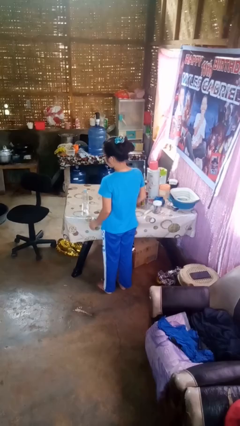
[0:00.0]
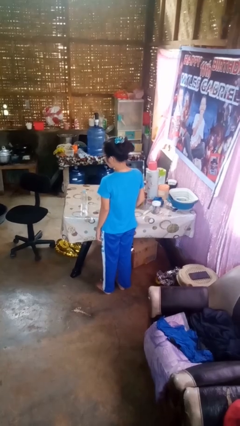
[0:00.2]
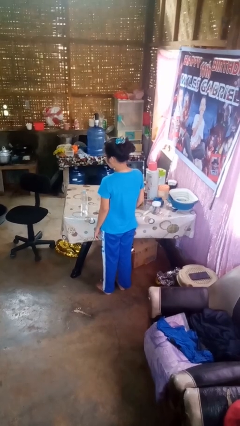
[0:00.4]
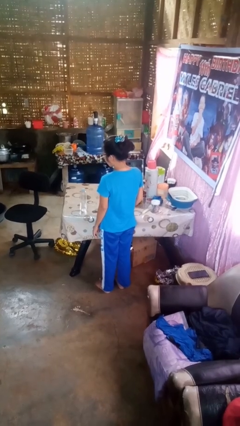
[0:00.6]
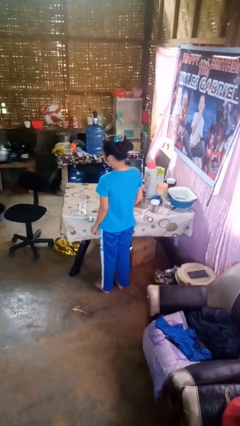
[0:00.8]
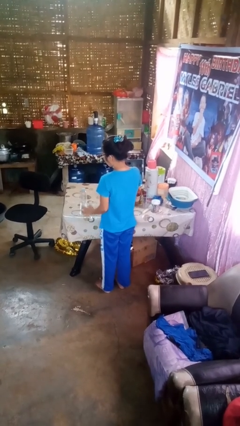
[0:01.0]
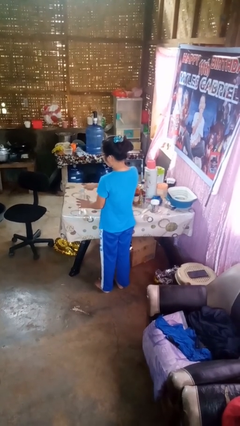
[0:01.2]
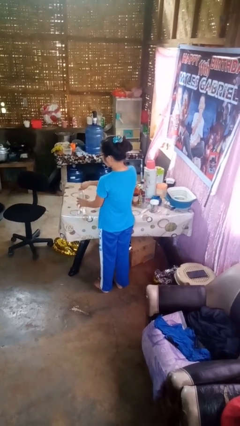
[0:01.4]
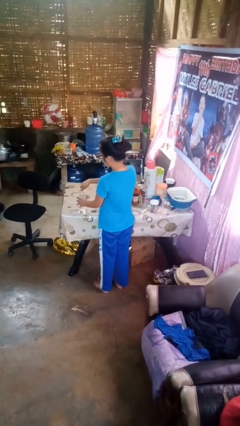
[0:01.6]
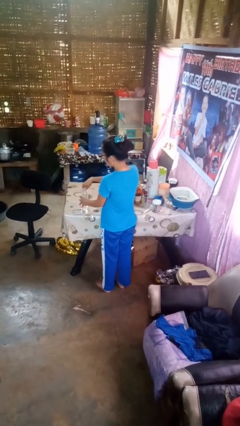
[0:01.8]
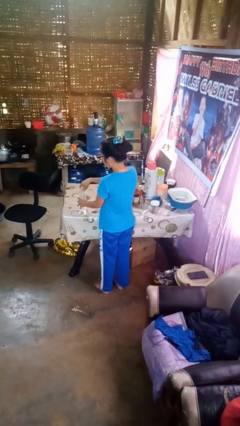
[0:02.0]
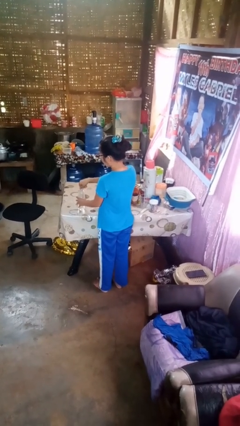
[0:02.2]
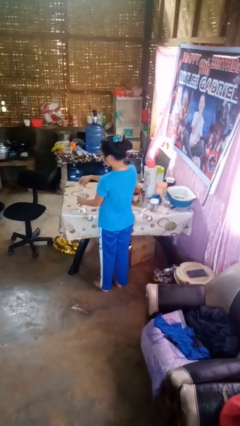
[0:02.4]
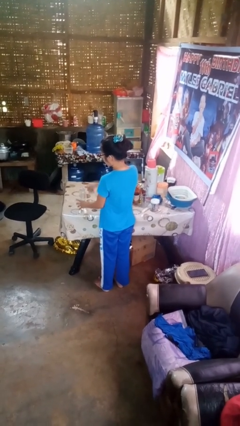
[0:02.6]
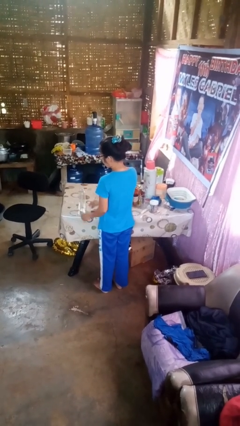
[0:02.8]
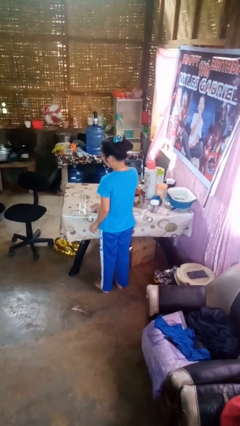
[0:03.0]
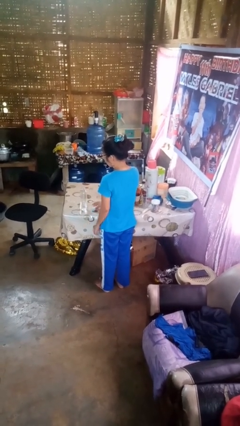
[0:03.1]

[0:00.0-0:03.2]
person unscrews lid from bottle

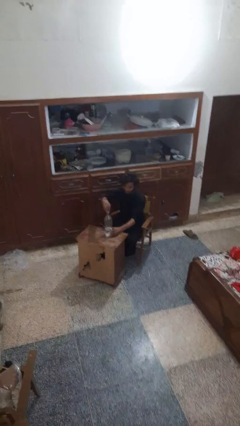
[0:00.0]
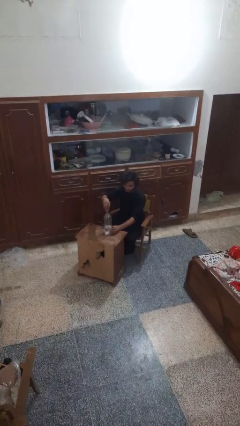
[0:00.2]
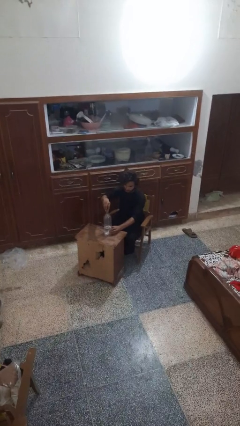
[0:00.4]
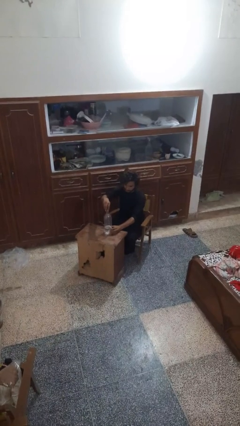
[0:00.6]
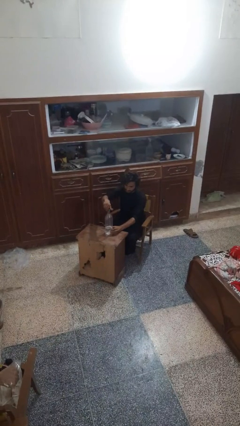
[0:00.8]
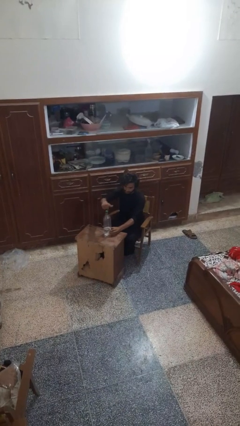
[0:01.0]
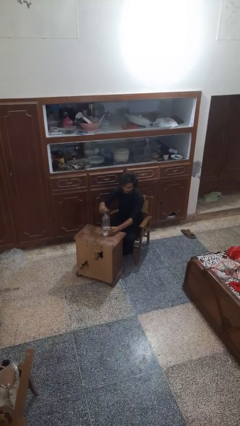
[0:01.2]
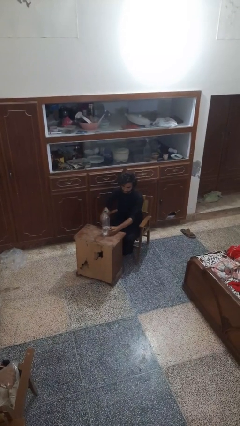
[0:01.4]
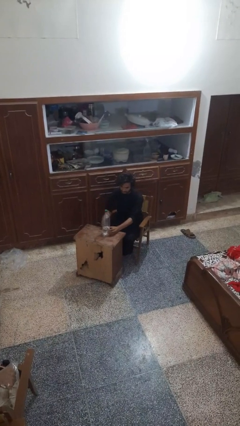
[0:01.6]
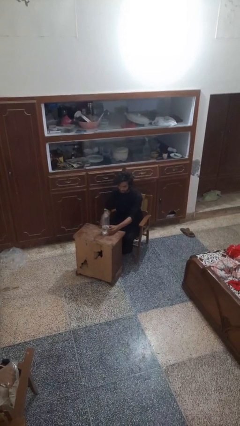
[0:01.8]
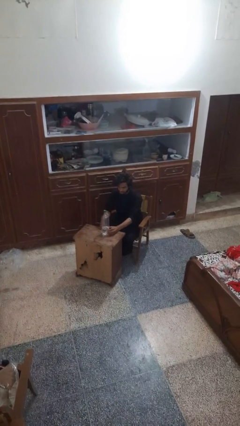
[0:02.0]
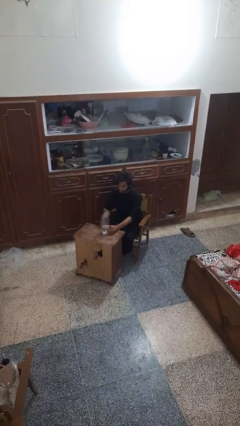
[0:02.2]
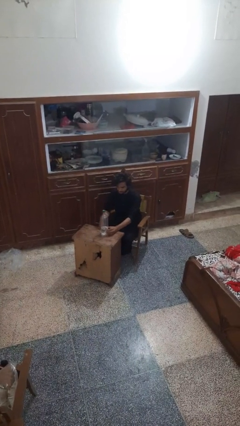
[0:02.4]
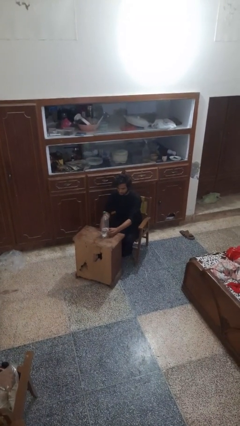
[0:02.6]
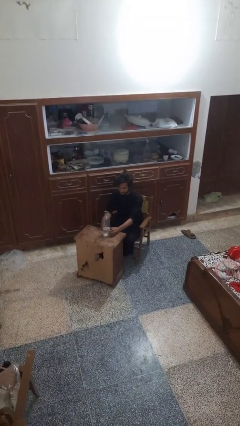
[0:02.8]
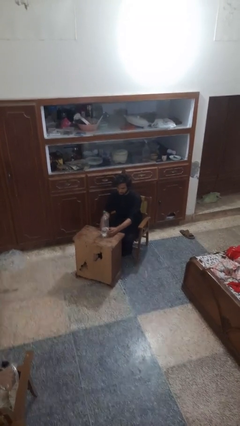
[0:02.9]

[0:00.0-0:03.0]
person screws lid to bottle

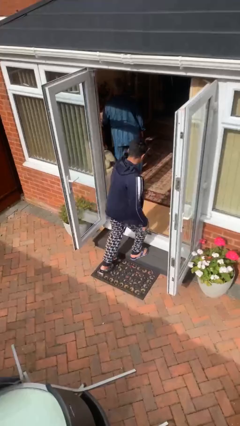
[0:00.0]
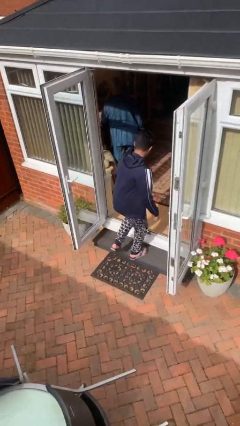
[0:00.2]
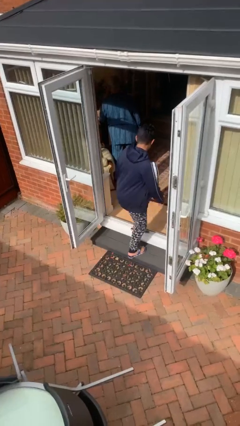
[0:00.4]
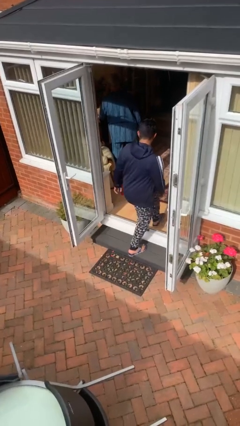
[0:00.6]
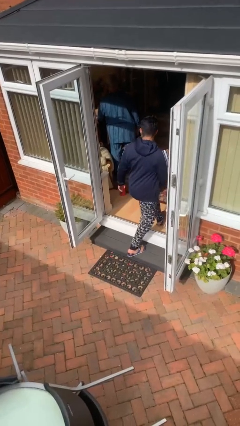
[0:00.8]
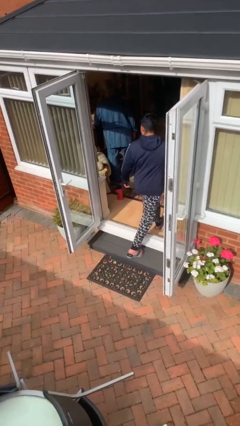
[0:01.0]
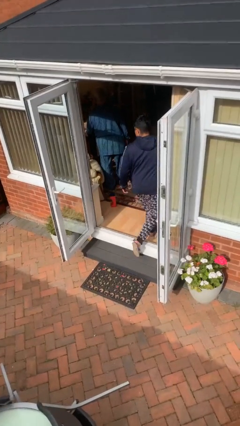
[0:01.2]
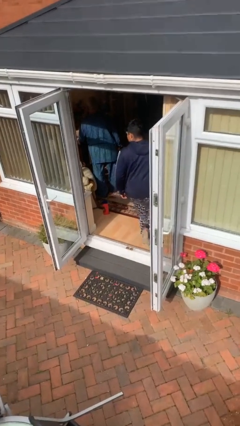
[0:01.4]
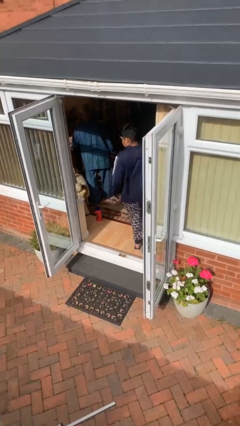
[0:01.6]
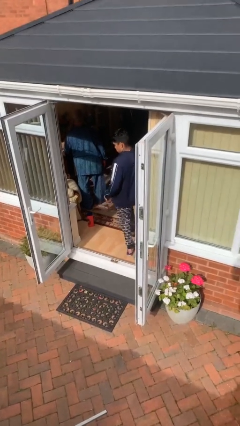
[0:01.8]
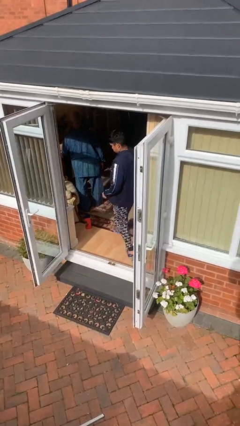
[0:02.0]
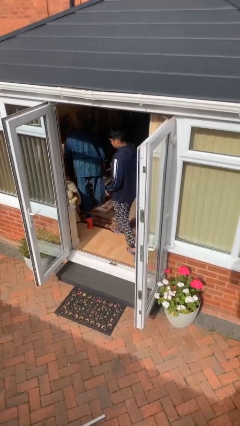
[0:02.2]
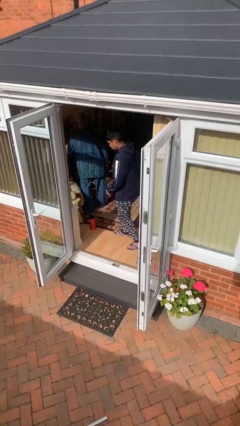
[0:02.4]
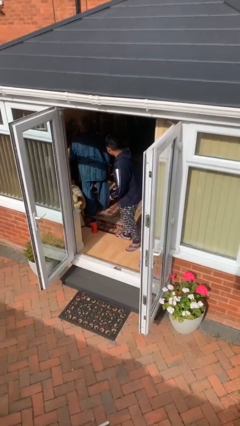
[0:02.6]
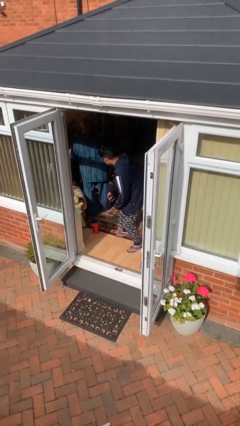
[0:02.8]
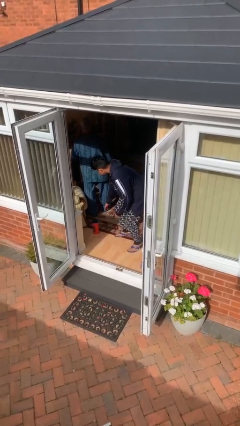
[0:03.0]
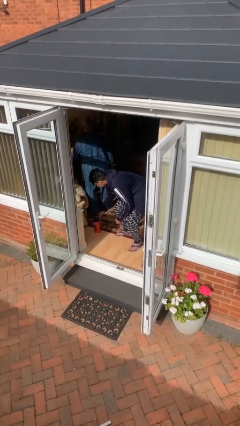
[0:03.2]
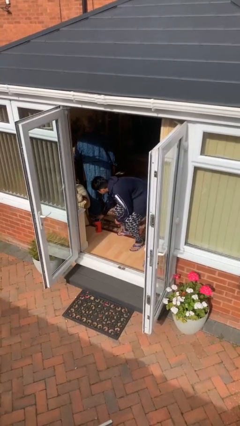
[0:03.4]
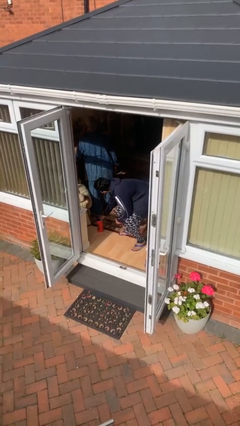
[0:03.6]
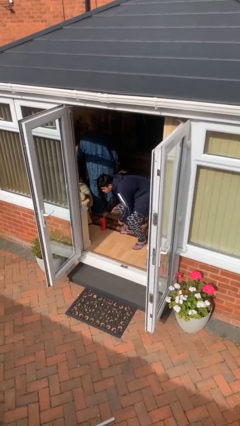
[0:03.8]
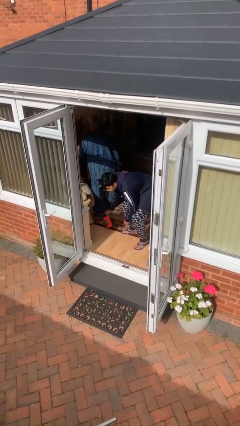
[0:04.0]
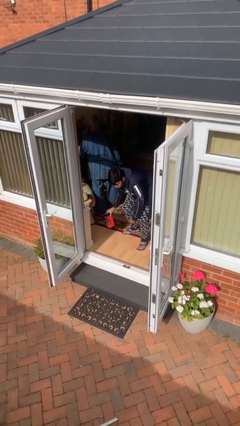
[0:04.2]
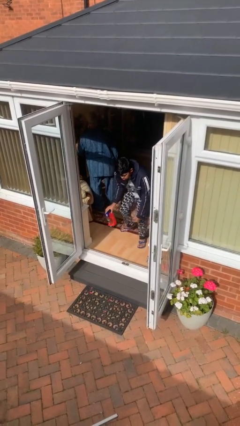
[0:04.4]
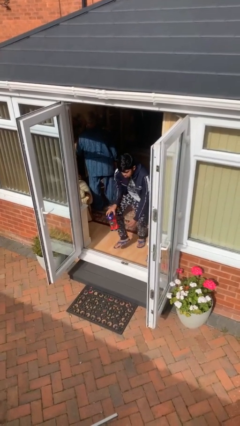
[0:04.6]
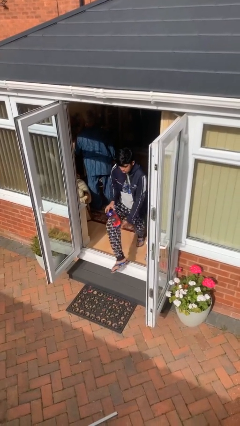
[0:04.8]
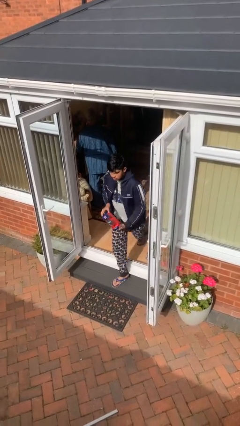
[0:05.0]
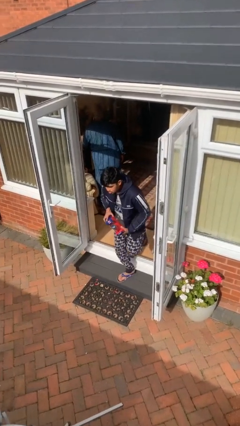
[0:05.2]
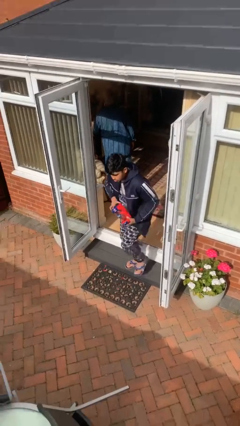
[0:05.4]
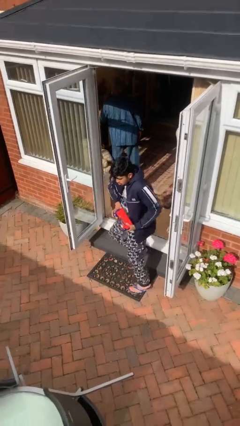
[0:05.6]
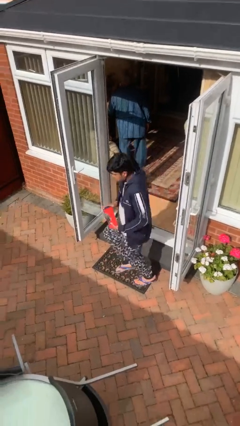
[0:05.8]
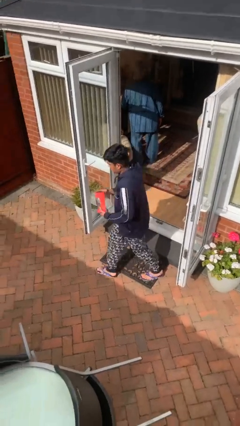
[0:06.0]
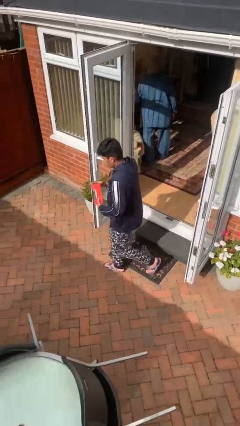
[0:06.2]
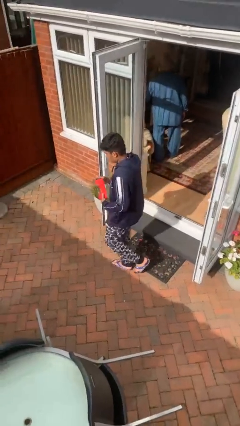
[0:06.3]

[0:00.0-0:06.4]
person steals object from person

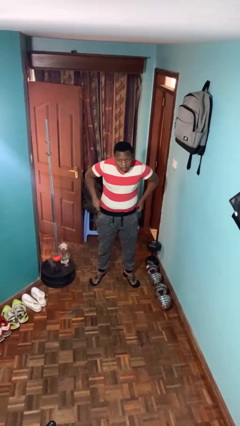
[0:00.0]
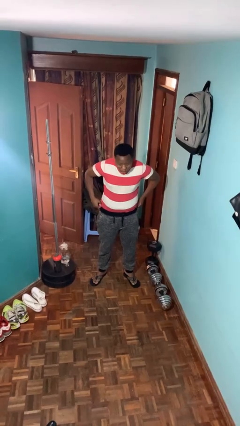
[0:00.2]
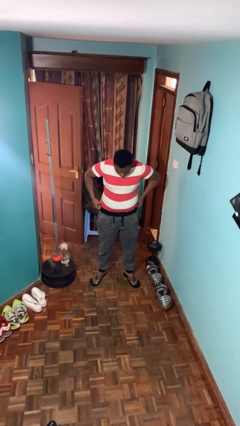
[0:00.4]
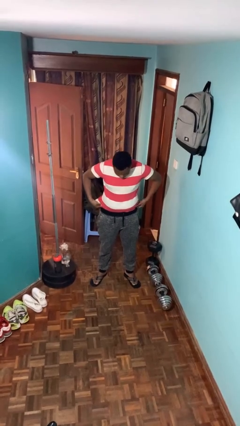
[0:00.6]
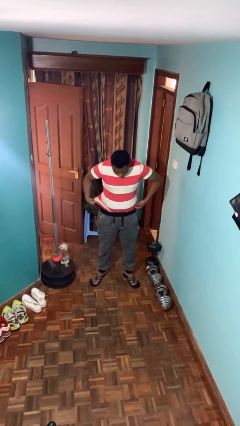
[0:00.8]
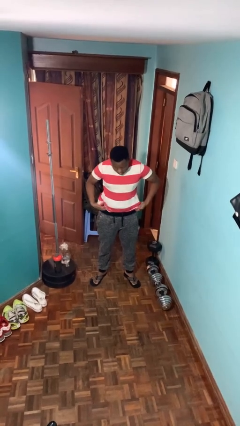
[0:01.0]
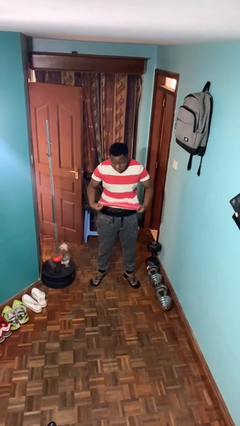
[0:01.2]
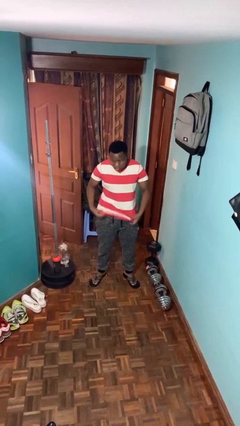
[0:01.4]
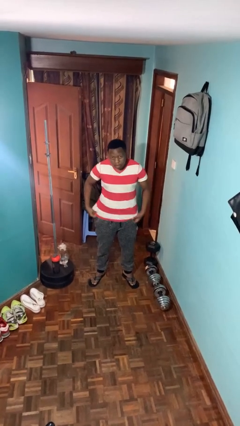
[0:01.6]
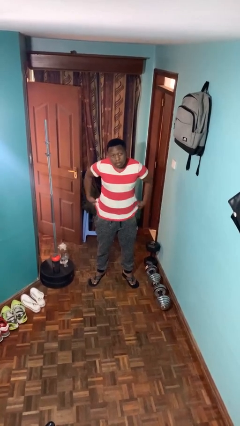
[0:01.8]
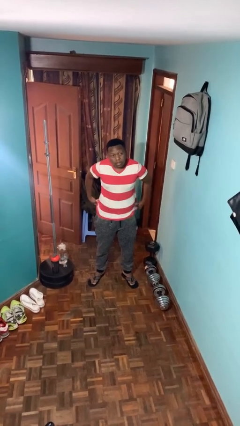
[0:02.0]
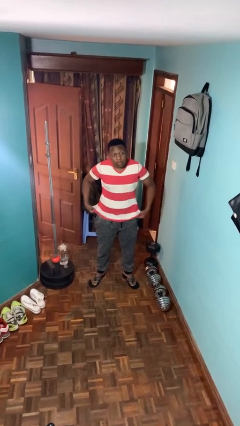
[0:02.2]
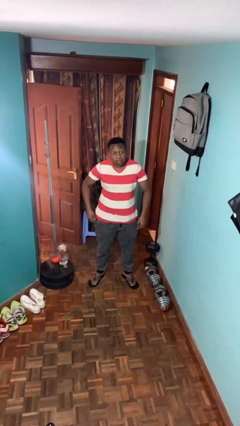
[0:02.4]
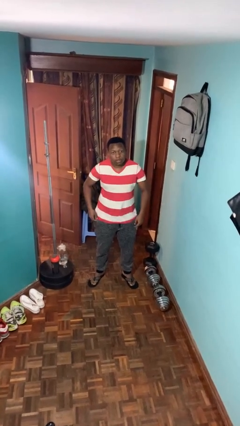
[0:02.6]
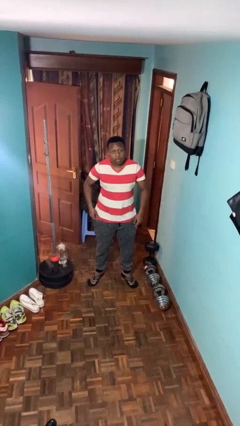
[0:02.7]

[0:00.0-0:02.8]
person untucks shirt

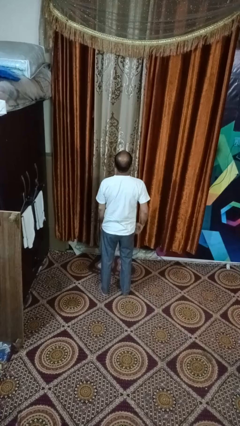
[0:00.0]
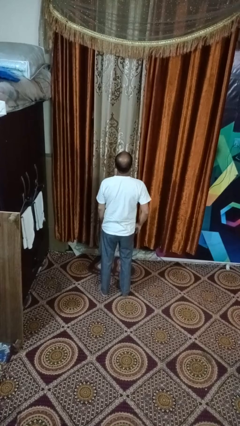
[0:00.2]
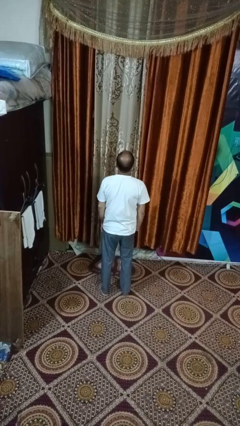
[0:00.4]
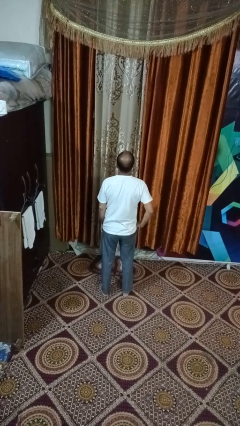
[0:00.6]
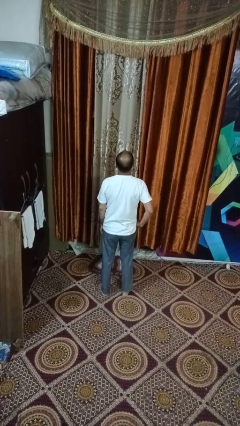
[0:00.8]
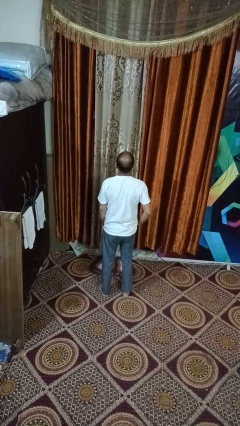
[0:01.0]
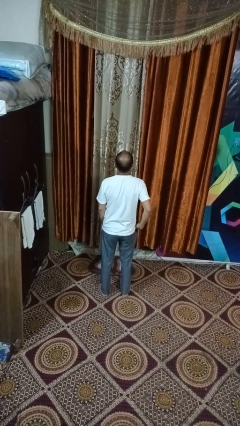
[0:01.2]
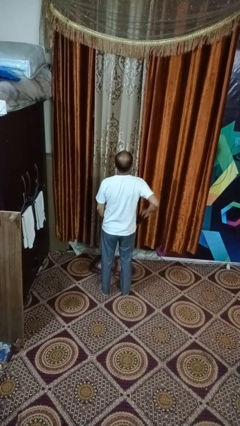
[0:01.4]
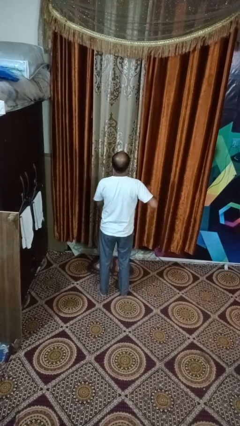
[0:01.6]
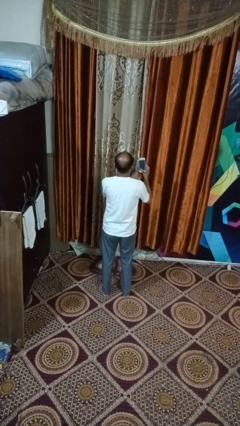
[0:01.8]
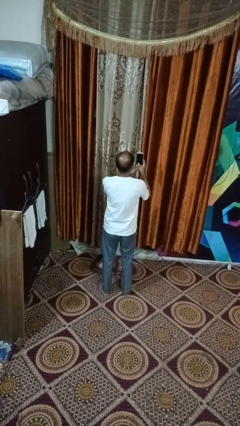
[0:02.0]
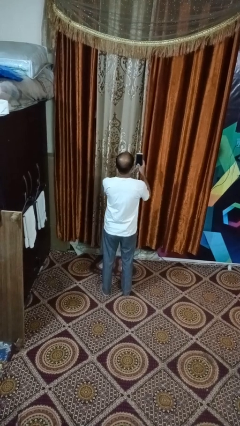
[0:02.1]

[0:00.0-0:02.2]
person takes phone from pocket

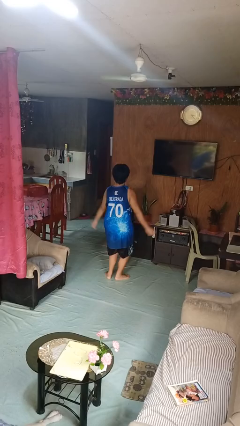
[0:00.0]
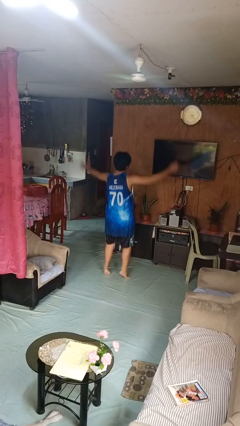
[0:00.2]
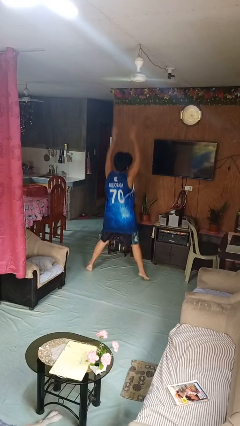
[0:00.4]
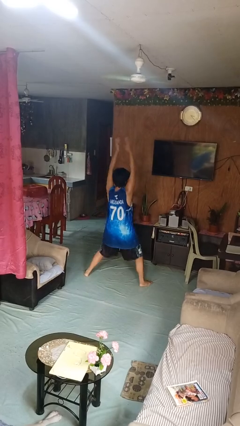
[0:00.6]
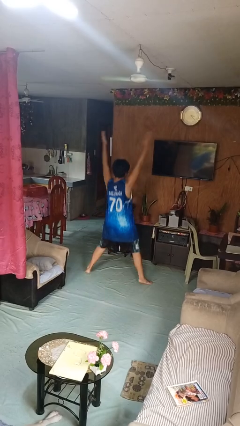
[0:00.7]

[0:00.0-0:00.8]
person exercises with jumping jacks
